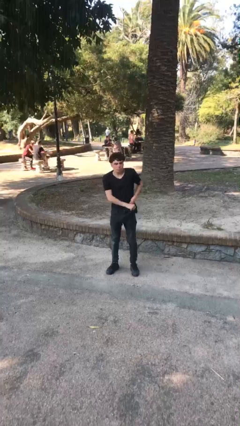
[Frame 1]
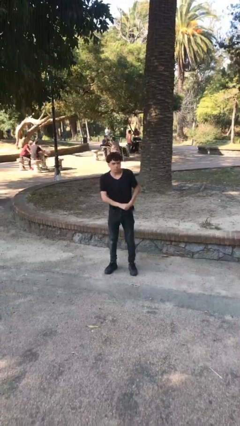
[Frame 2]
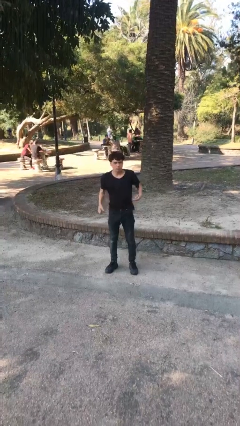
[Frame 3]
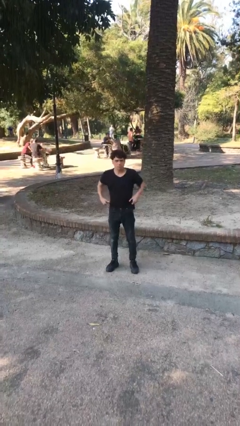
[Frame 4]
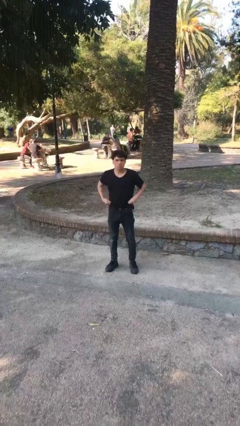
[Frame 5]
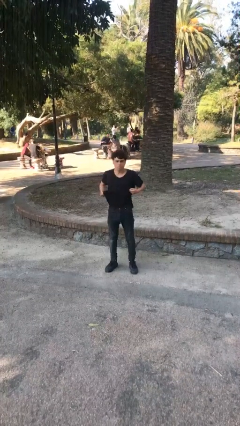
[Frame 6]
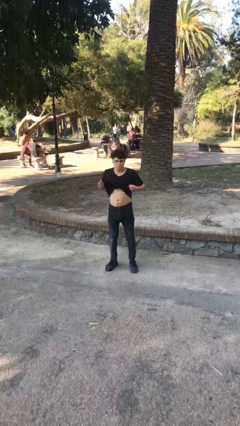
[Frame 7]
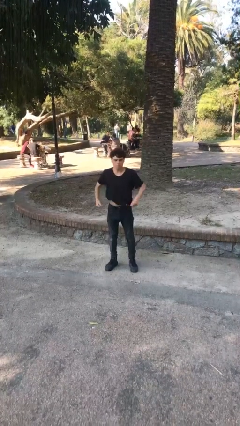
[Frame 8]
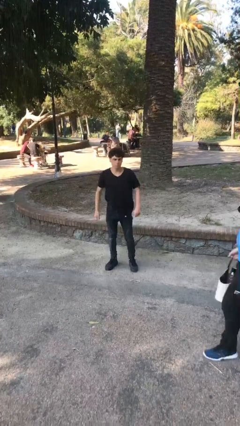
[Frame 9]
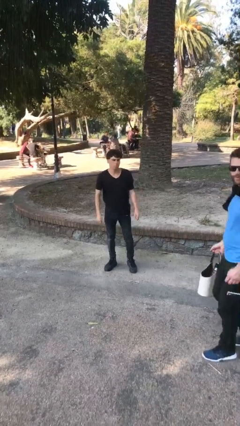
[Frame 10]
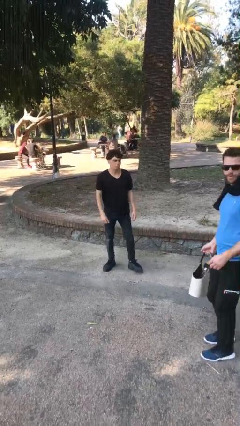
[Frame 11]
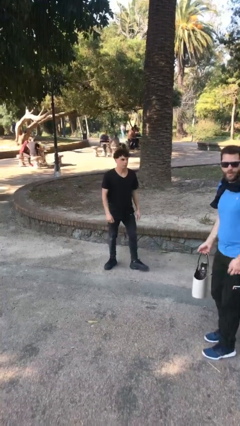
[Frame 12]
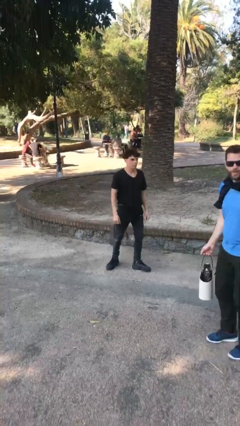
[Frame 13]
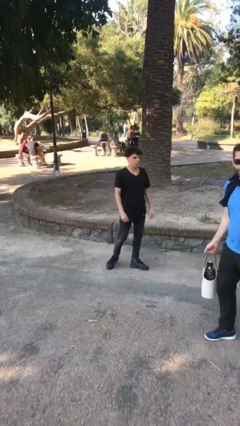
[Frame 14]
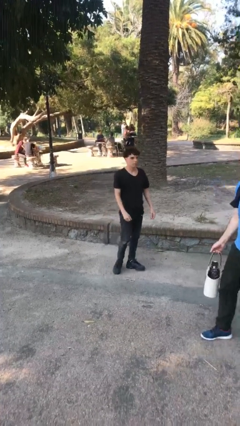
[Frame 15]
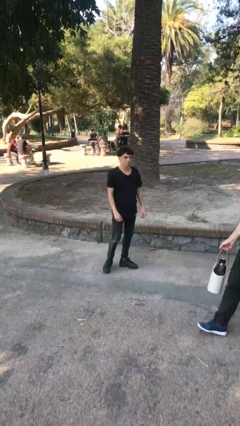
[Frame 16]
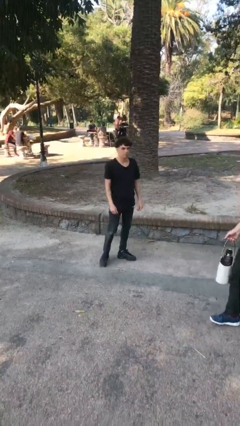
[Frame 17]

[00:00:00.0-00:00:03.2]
person untucks shirt

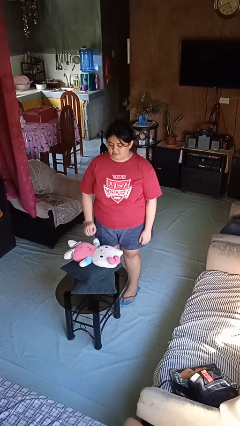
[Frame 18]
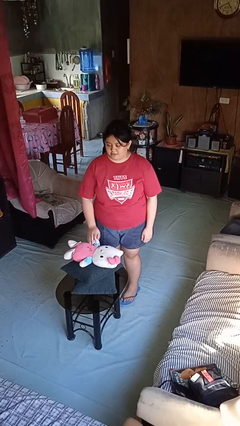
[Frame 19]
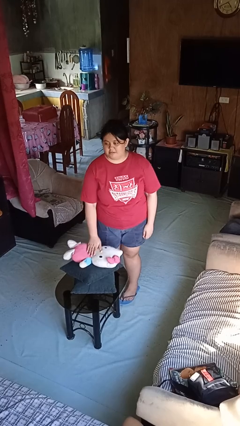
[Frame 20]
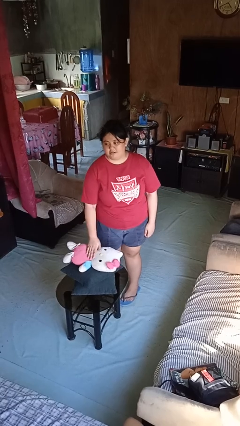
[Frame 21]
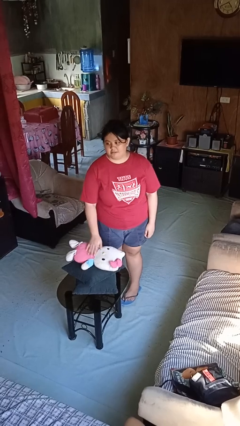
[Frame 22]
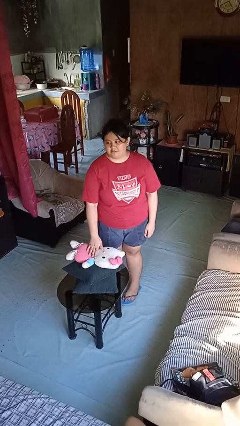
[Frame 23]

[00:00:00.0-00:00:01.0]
person taps object with finger

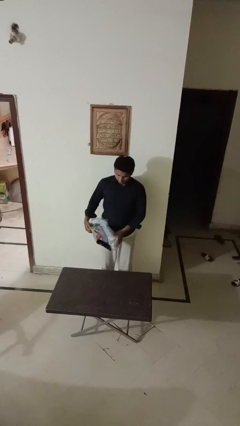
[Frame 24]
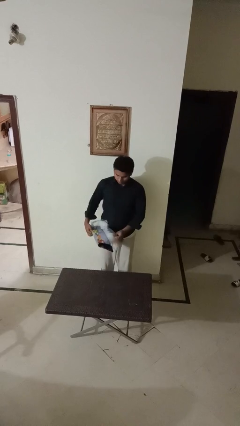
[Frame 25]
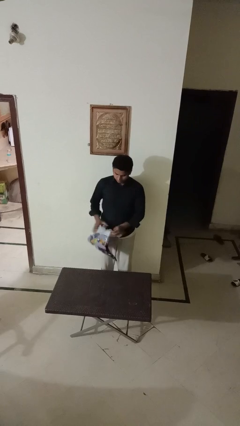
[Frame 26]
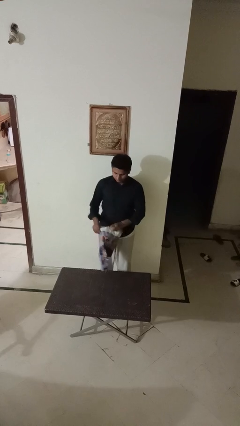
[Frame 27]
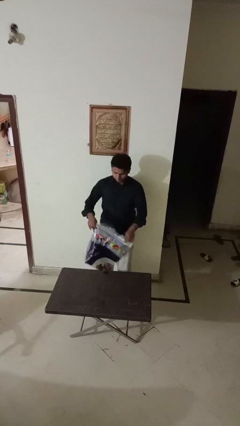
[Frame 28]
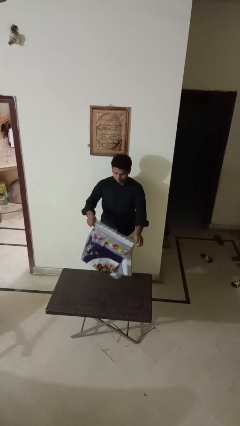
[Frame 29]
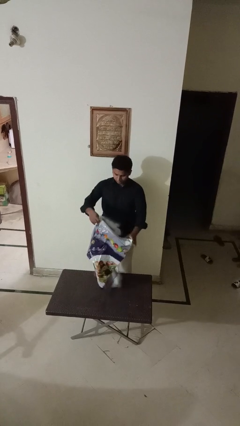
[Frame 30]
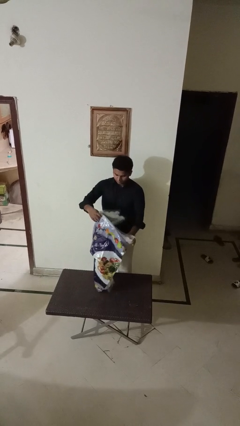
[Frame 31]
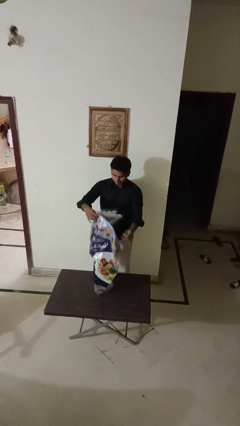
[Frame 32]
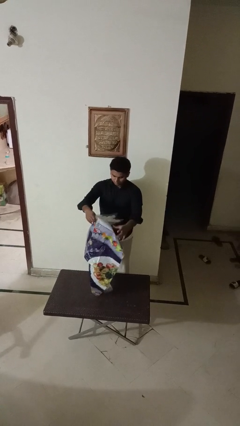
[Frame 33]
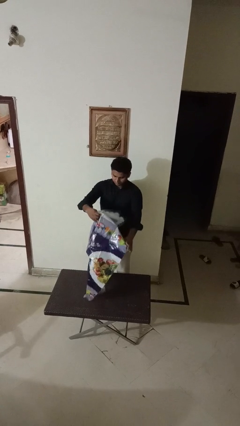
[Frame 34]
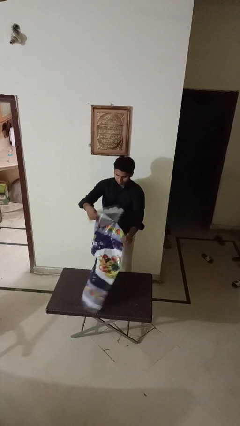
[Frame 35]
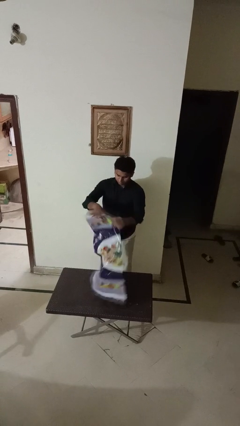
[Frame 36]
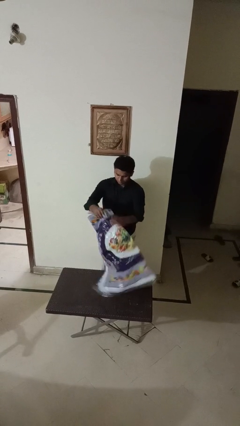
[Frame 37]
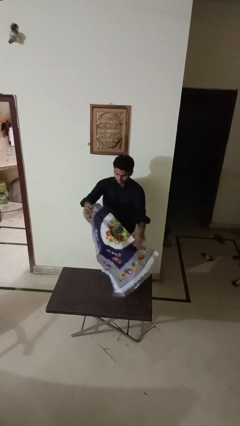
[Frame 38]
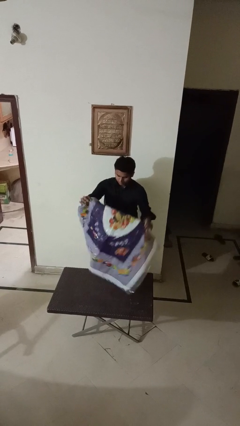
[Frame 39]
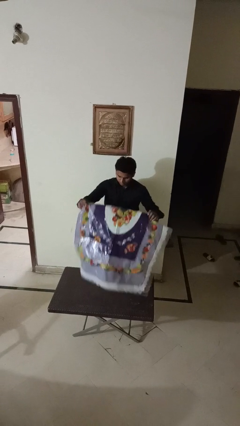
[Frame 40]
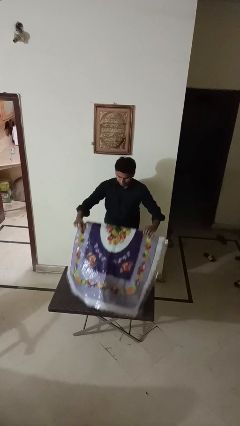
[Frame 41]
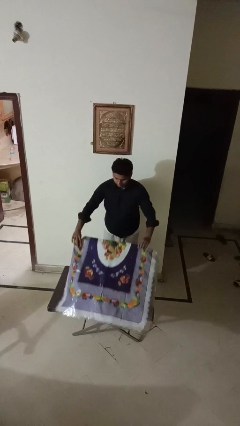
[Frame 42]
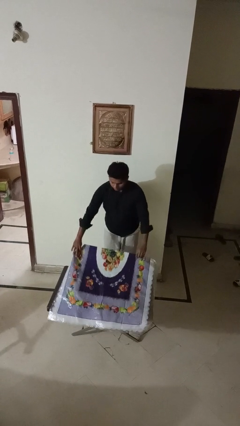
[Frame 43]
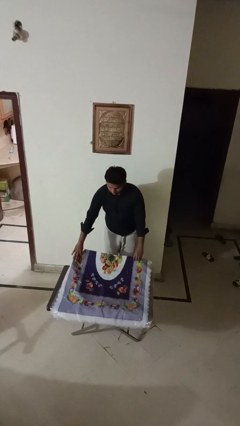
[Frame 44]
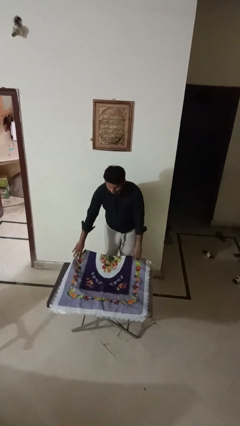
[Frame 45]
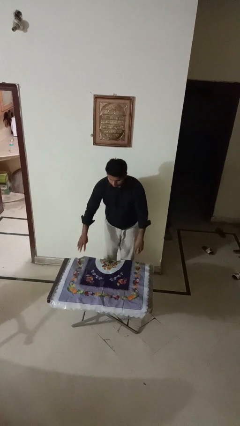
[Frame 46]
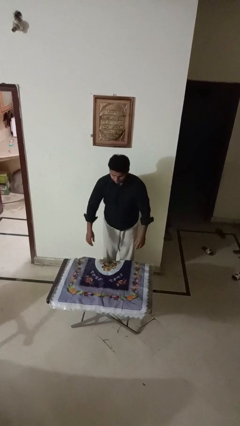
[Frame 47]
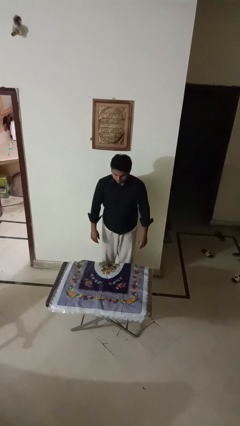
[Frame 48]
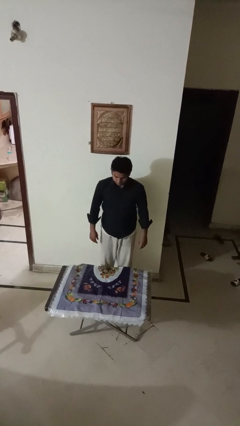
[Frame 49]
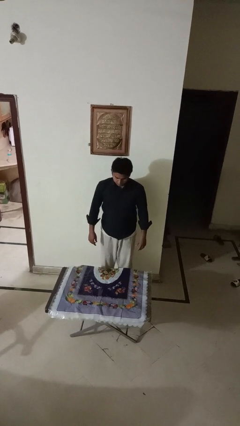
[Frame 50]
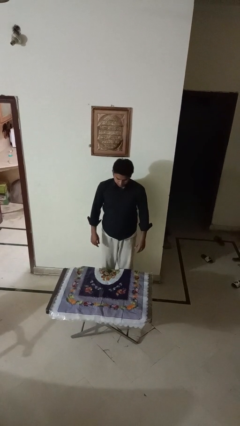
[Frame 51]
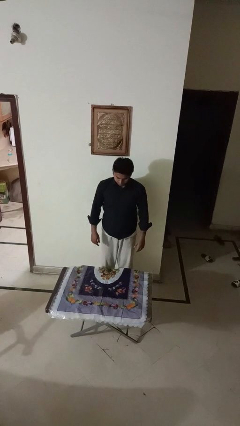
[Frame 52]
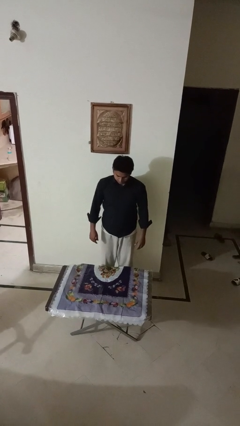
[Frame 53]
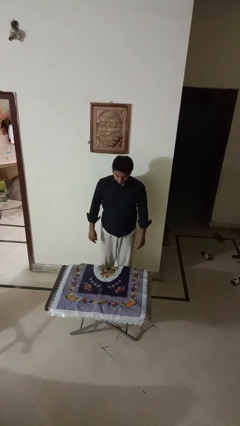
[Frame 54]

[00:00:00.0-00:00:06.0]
person spreads tablecloth

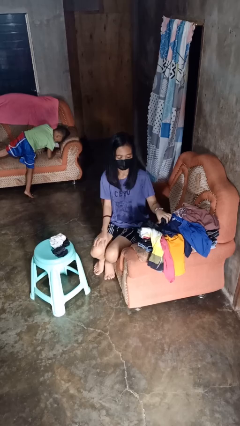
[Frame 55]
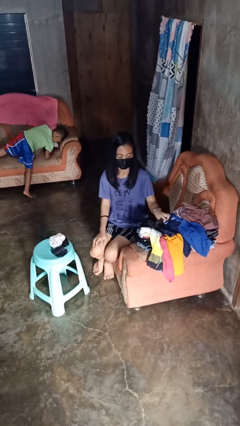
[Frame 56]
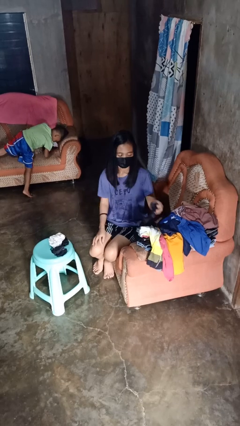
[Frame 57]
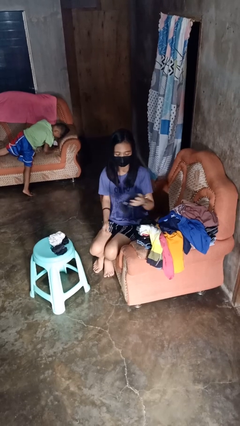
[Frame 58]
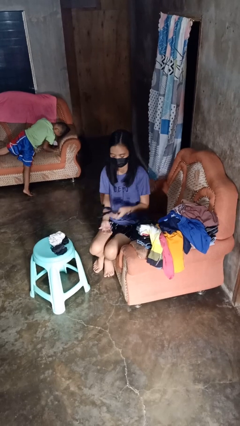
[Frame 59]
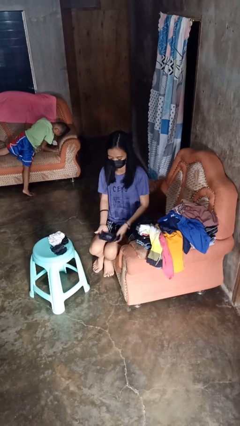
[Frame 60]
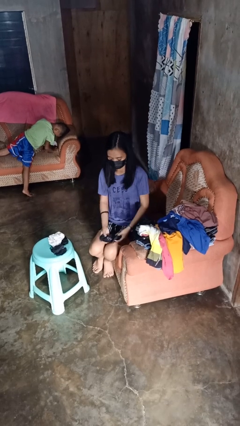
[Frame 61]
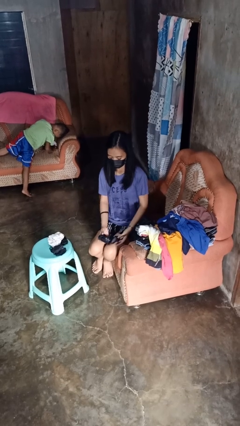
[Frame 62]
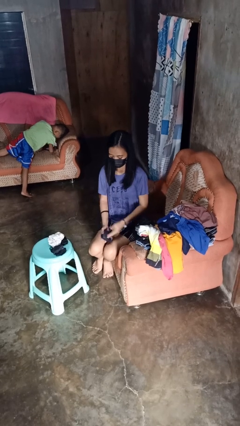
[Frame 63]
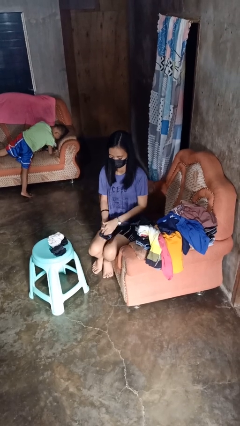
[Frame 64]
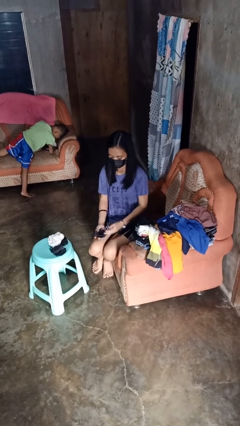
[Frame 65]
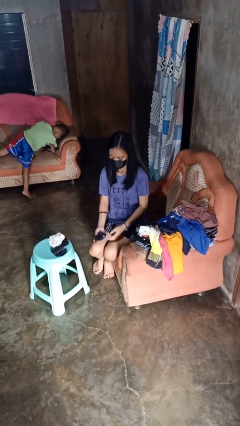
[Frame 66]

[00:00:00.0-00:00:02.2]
person folds socks

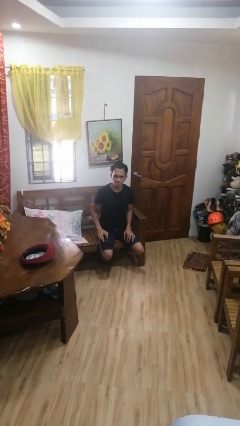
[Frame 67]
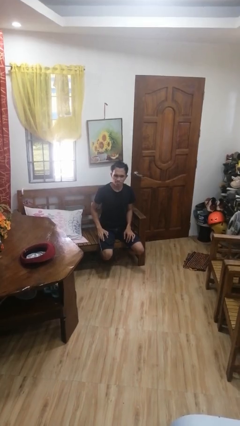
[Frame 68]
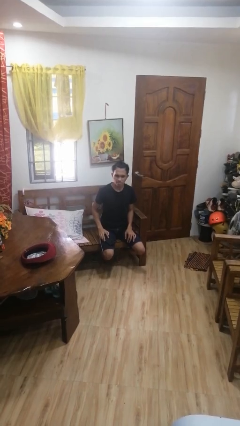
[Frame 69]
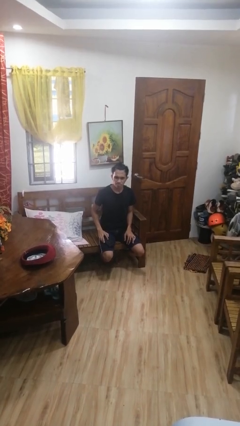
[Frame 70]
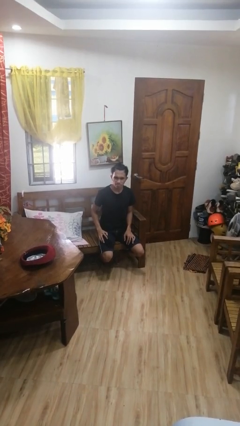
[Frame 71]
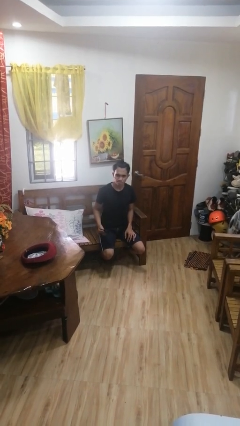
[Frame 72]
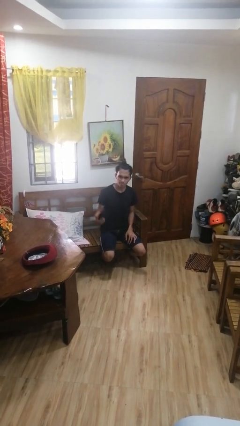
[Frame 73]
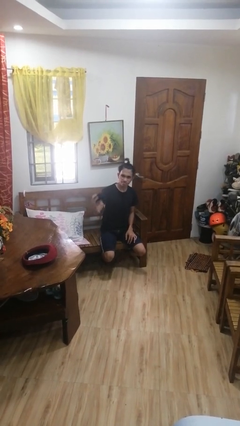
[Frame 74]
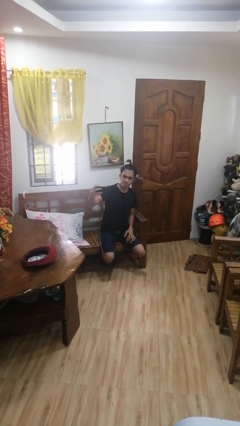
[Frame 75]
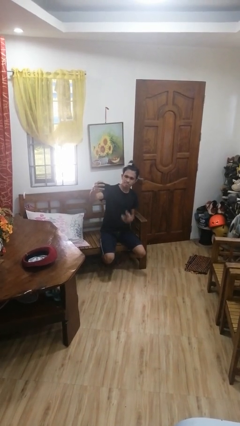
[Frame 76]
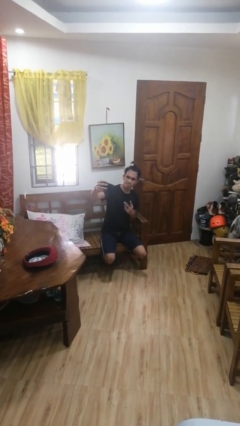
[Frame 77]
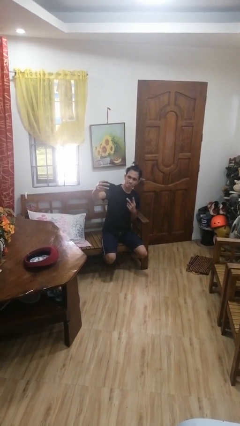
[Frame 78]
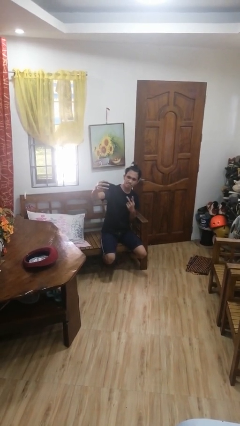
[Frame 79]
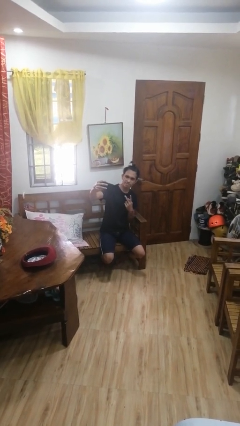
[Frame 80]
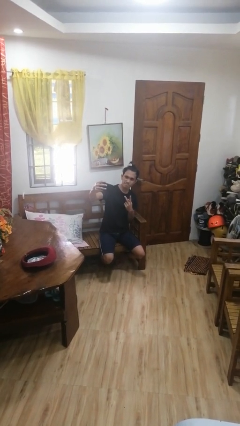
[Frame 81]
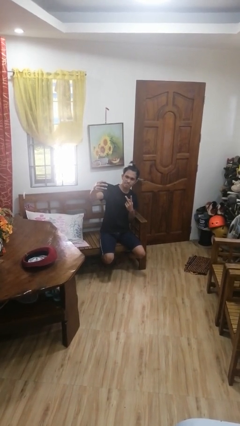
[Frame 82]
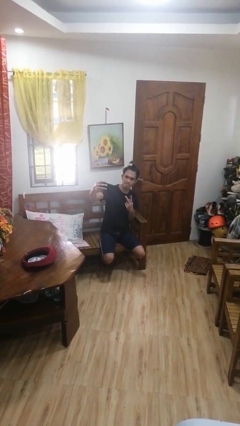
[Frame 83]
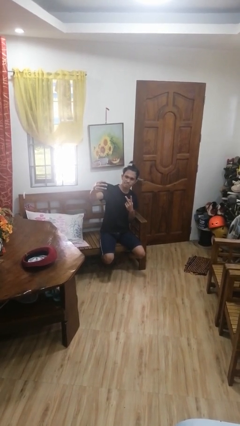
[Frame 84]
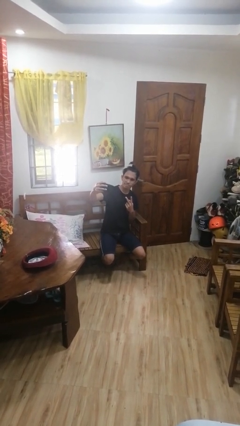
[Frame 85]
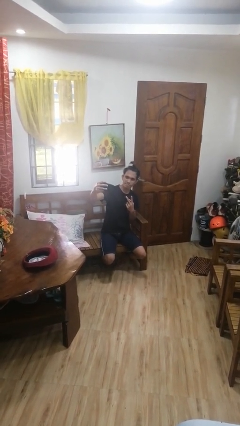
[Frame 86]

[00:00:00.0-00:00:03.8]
person takes selfie

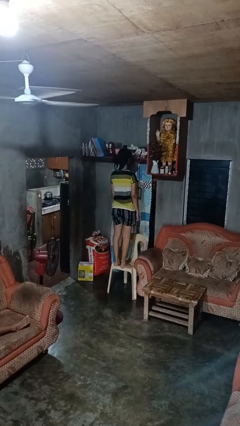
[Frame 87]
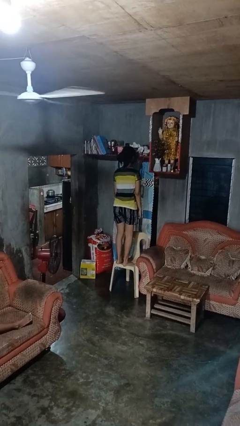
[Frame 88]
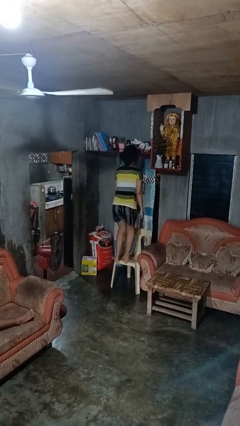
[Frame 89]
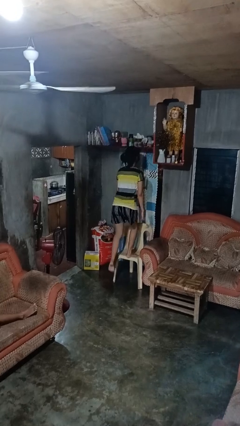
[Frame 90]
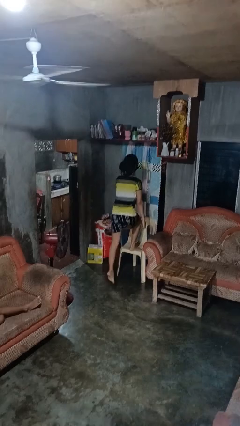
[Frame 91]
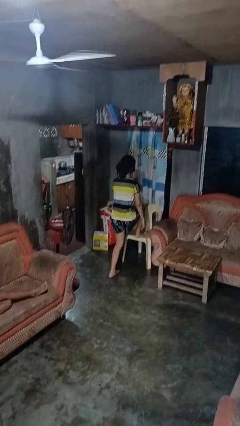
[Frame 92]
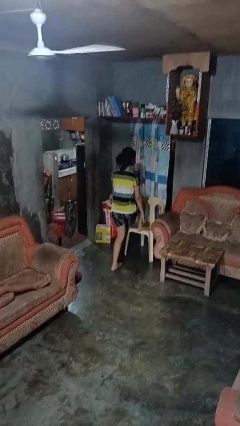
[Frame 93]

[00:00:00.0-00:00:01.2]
person climbs off chair
